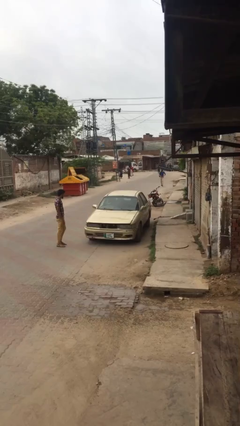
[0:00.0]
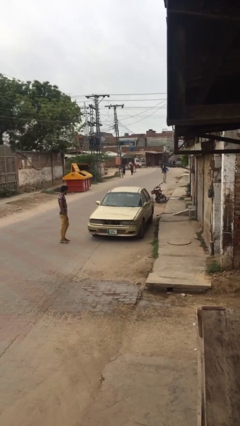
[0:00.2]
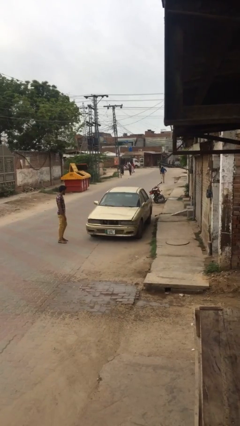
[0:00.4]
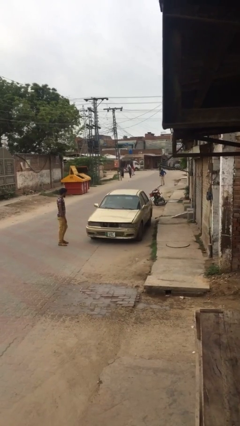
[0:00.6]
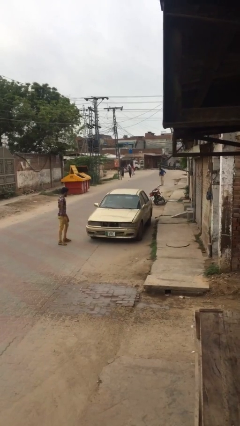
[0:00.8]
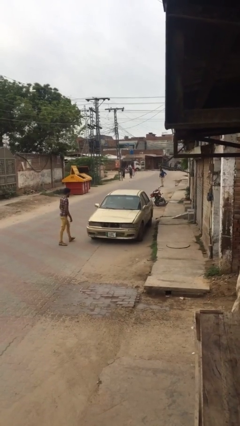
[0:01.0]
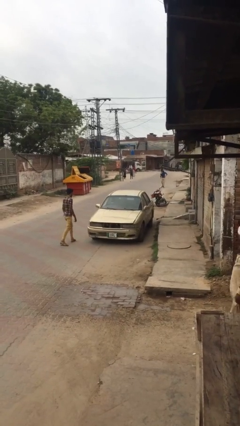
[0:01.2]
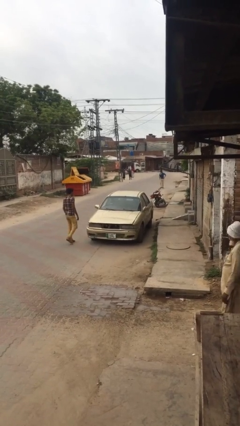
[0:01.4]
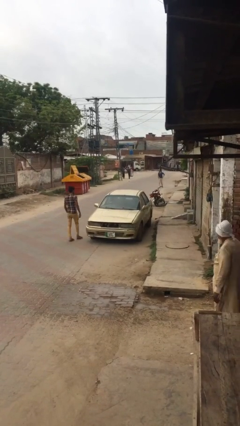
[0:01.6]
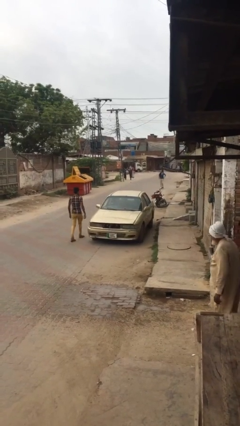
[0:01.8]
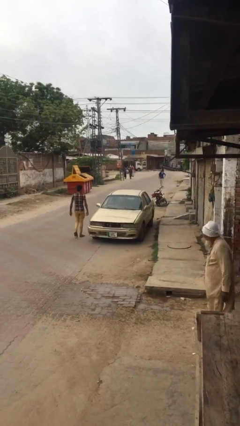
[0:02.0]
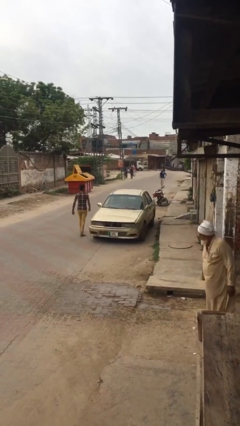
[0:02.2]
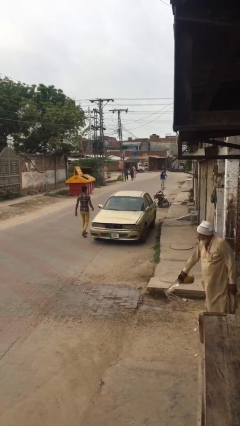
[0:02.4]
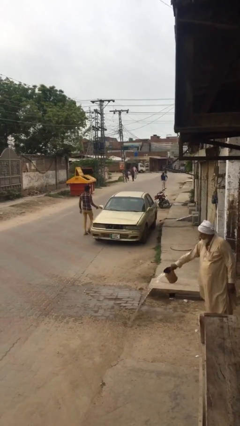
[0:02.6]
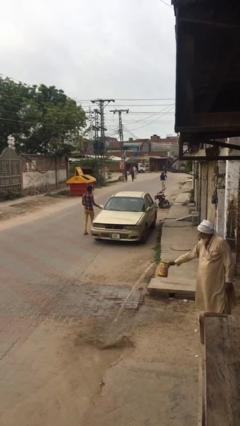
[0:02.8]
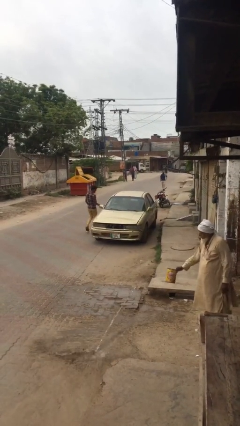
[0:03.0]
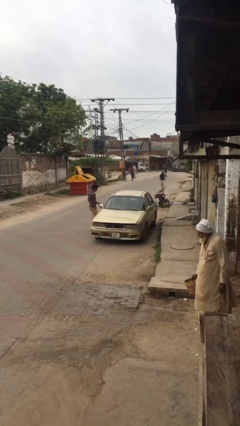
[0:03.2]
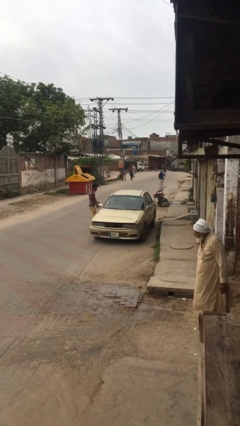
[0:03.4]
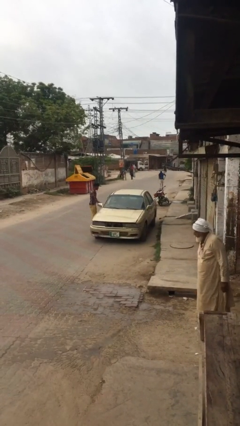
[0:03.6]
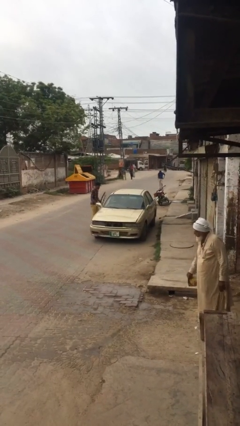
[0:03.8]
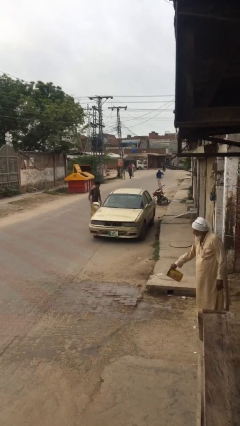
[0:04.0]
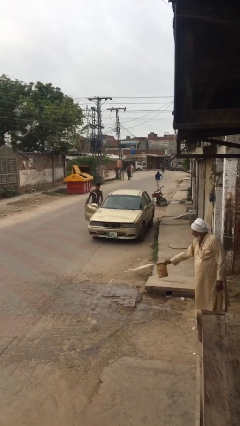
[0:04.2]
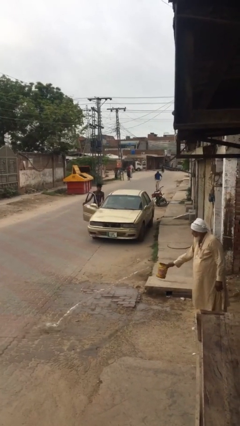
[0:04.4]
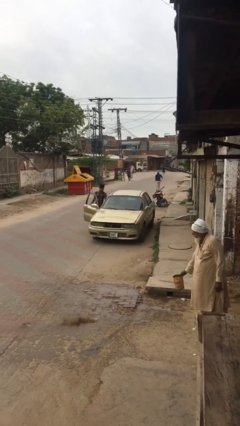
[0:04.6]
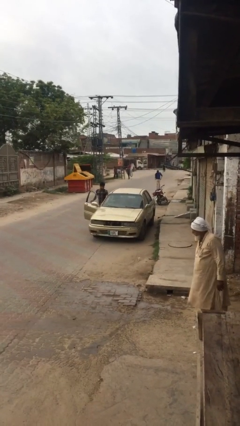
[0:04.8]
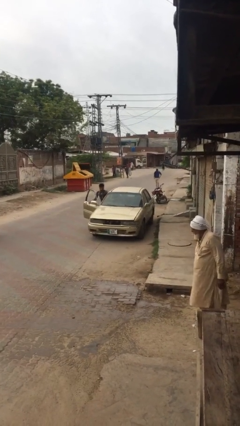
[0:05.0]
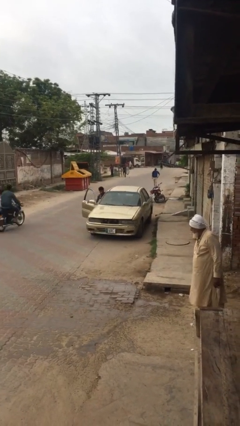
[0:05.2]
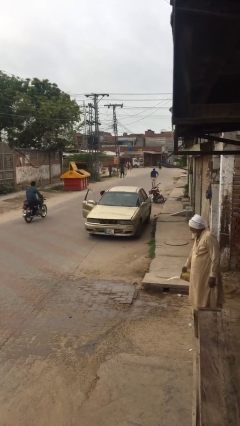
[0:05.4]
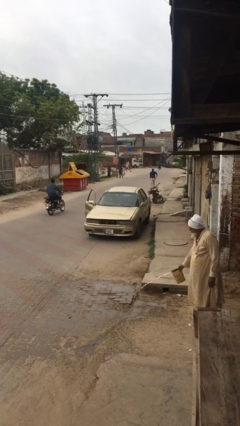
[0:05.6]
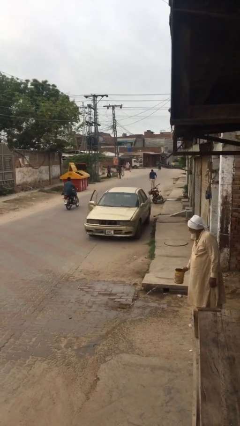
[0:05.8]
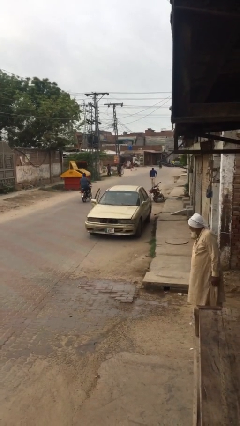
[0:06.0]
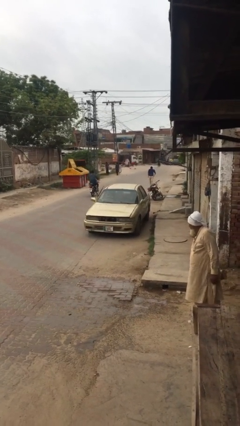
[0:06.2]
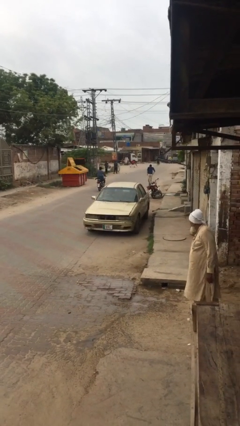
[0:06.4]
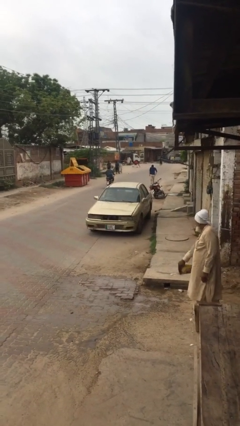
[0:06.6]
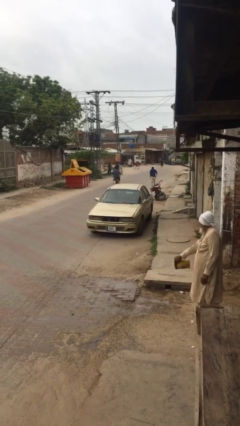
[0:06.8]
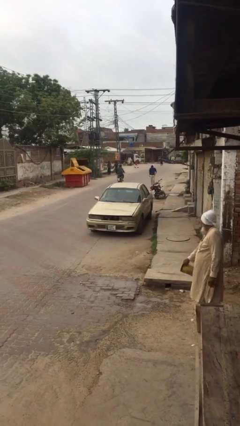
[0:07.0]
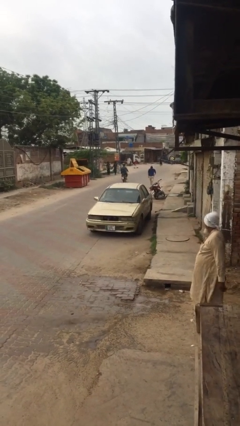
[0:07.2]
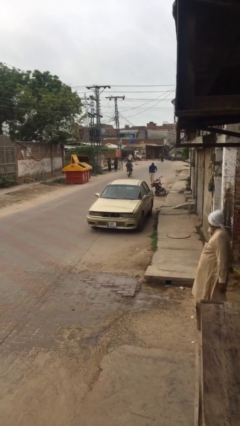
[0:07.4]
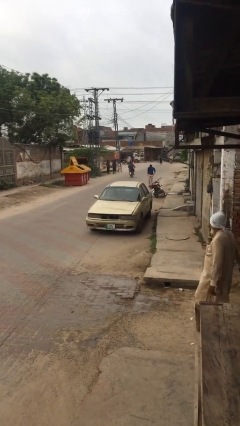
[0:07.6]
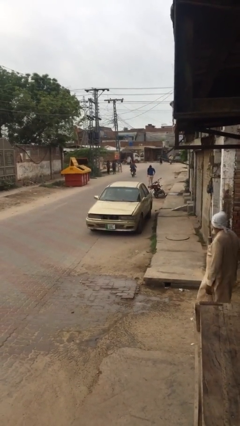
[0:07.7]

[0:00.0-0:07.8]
car picks up person

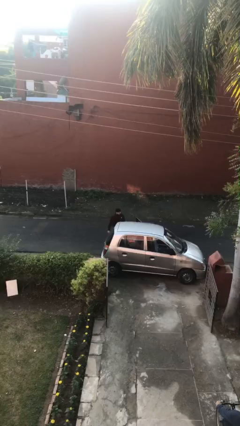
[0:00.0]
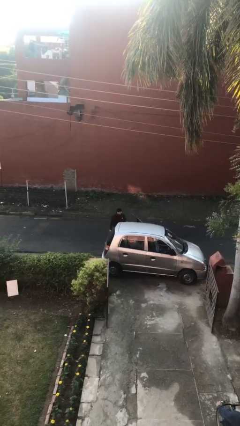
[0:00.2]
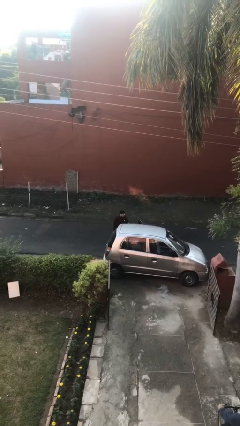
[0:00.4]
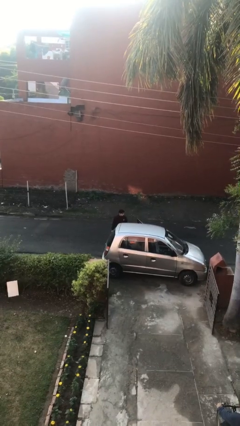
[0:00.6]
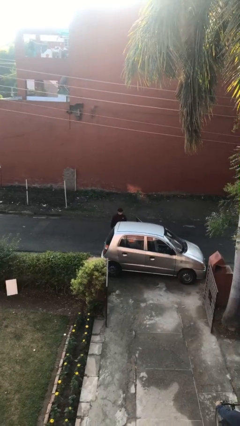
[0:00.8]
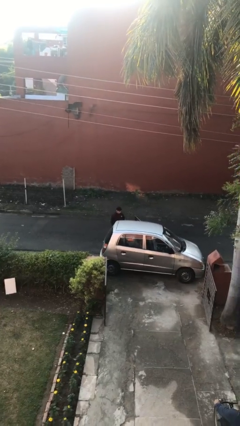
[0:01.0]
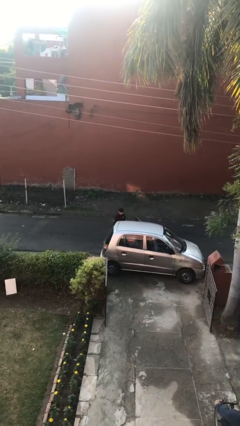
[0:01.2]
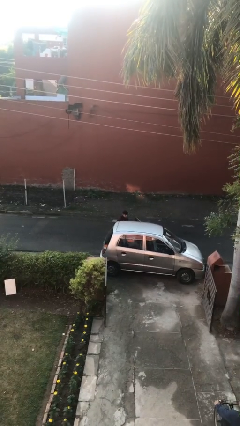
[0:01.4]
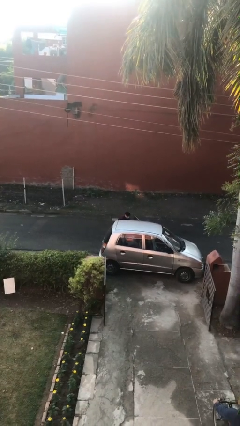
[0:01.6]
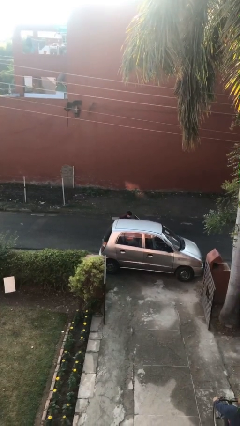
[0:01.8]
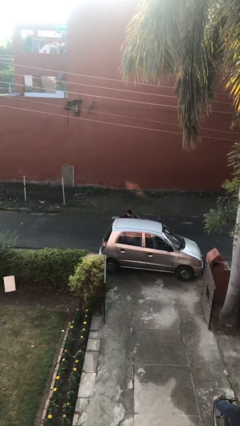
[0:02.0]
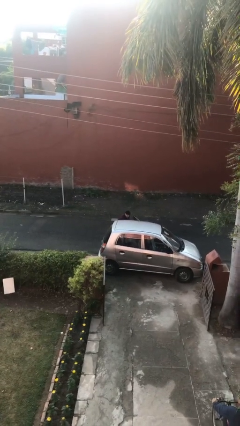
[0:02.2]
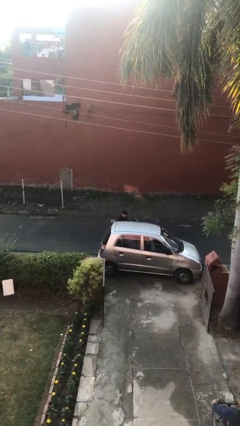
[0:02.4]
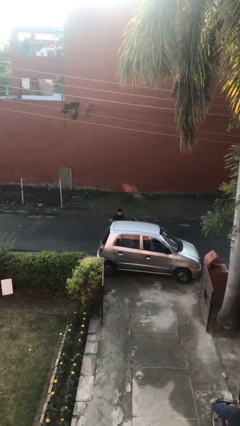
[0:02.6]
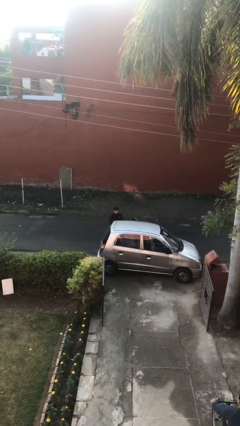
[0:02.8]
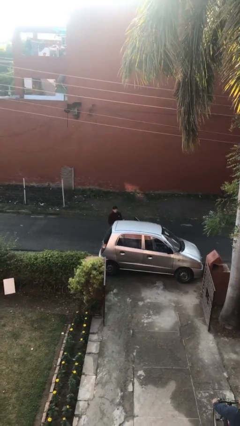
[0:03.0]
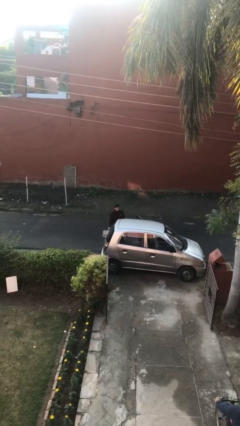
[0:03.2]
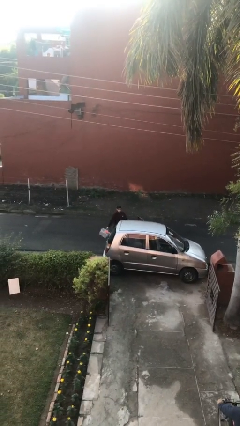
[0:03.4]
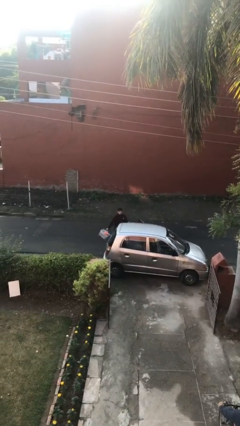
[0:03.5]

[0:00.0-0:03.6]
person unloads car

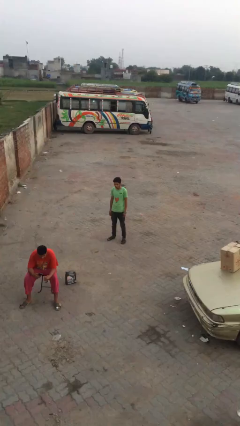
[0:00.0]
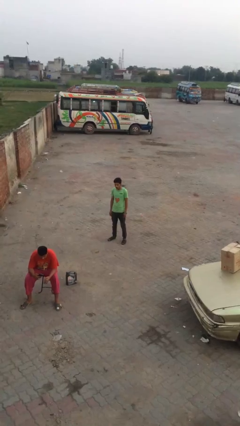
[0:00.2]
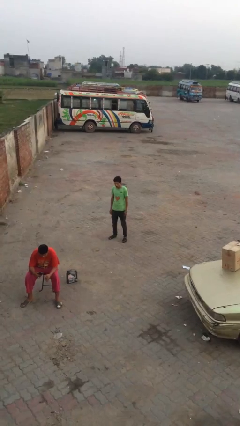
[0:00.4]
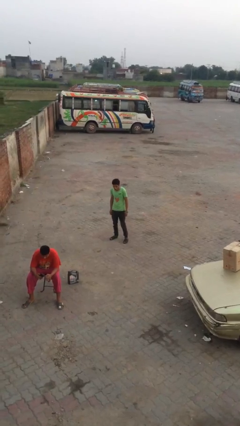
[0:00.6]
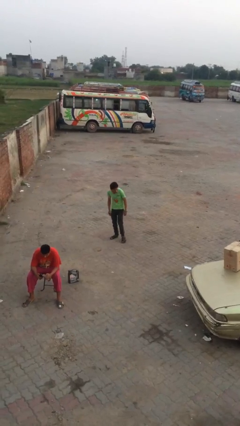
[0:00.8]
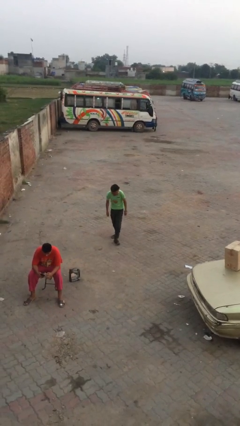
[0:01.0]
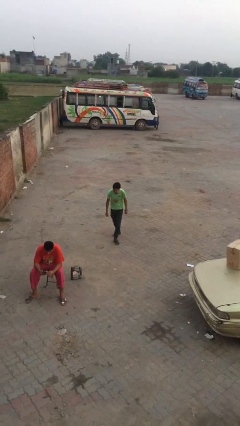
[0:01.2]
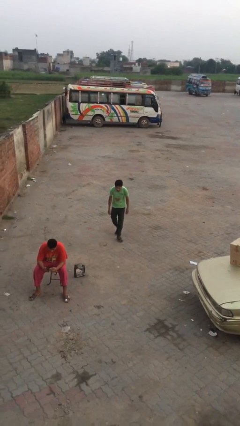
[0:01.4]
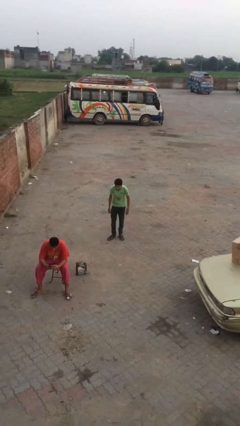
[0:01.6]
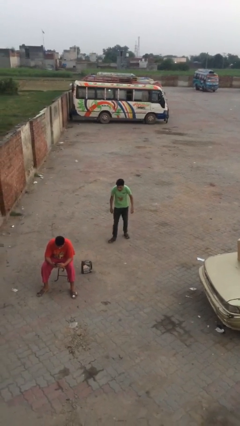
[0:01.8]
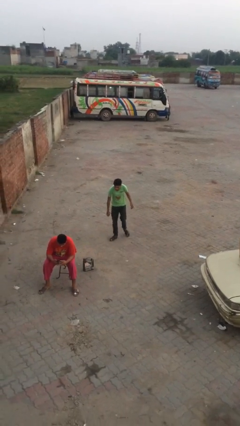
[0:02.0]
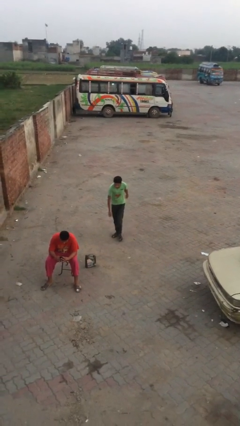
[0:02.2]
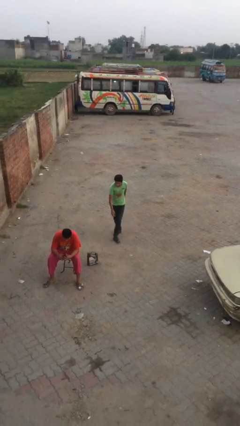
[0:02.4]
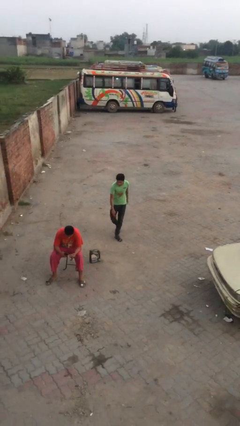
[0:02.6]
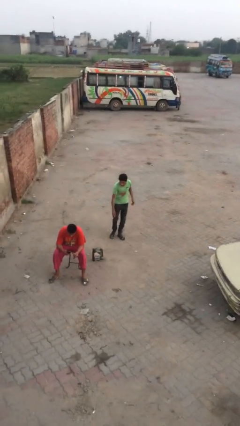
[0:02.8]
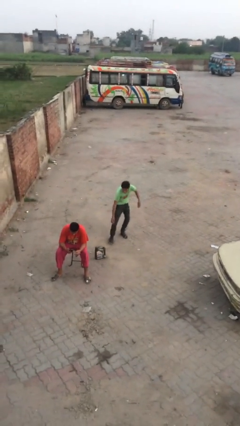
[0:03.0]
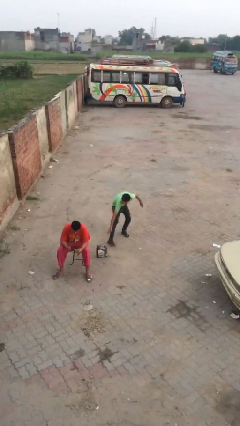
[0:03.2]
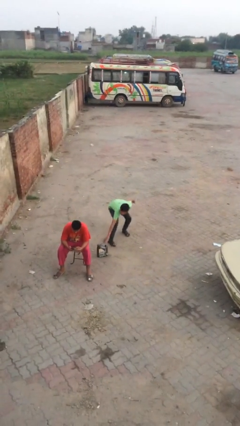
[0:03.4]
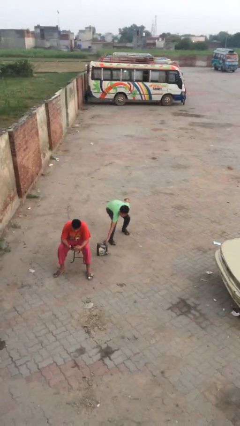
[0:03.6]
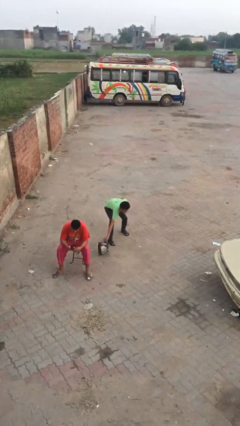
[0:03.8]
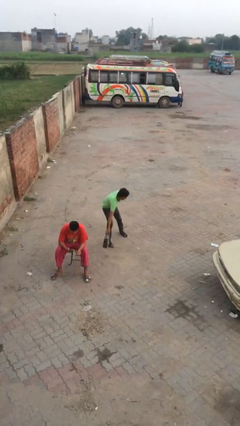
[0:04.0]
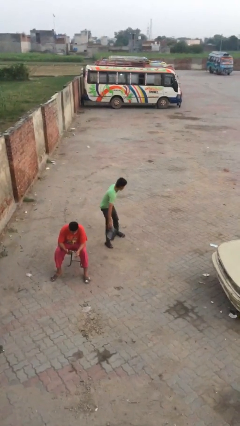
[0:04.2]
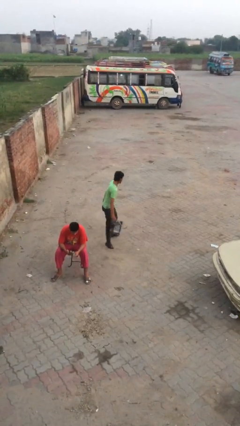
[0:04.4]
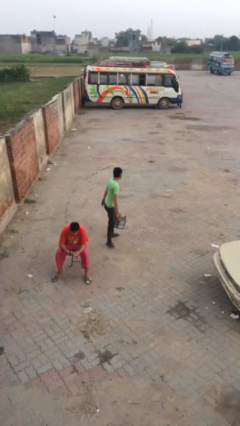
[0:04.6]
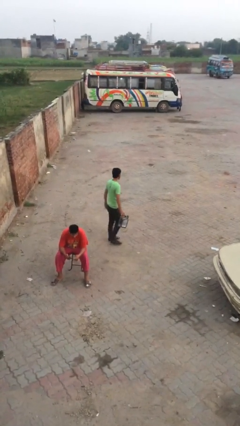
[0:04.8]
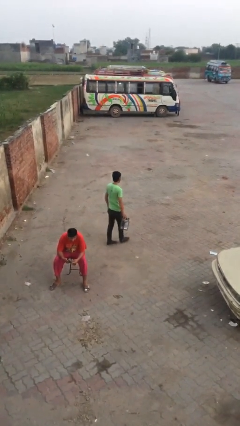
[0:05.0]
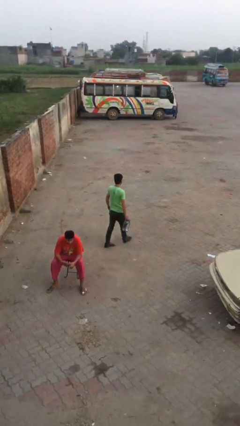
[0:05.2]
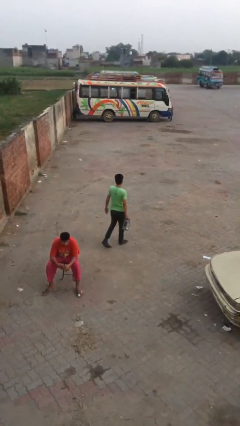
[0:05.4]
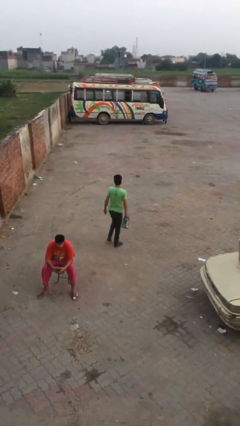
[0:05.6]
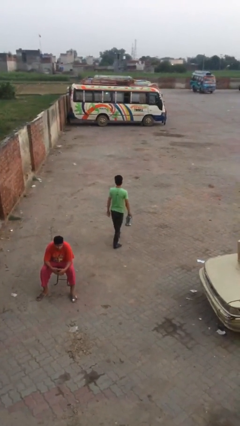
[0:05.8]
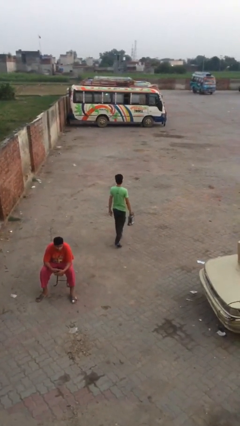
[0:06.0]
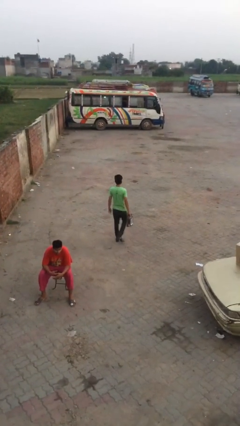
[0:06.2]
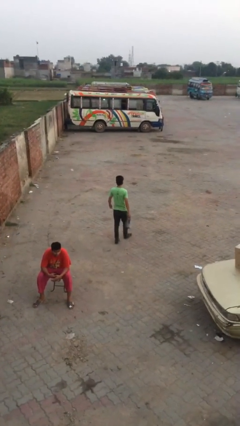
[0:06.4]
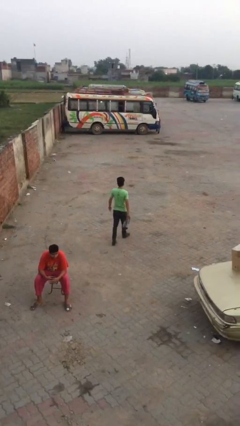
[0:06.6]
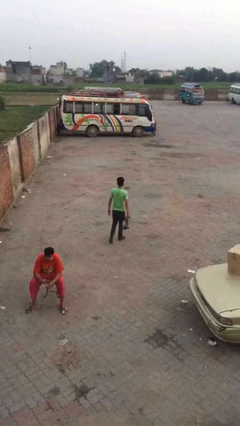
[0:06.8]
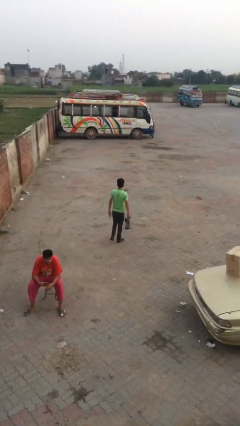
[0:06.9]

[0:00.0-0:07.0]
person steals object from person
